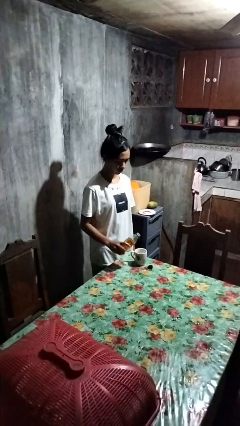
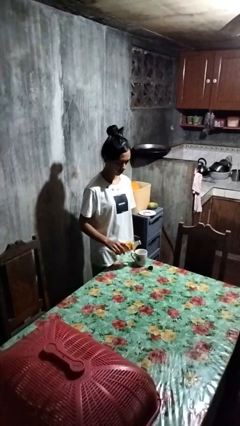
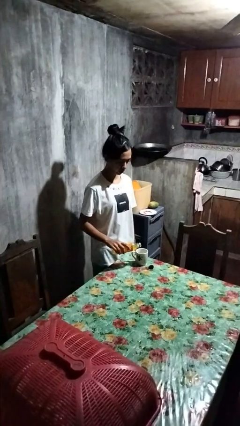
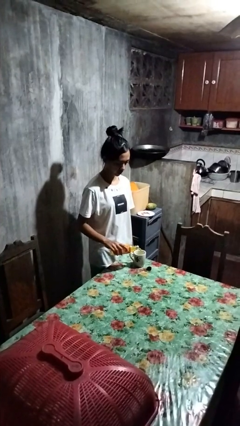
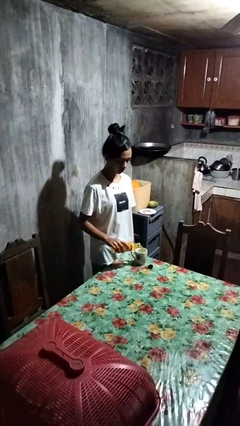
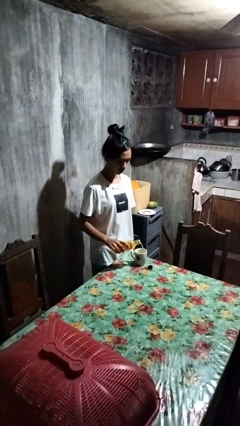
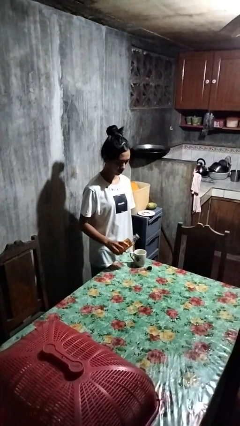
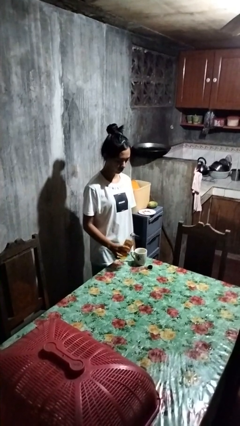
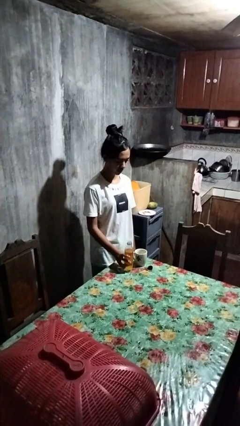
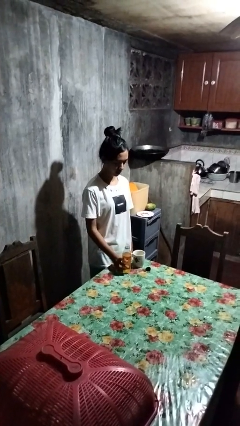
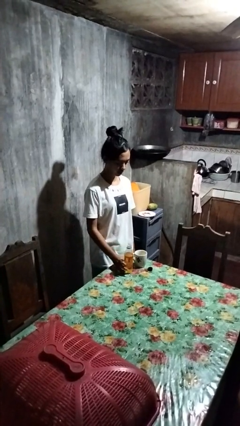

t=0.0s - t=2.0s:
person pours liquid into cup

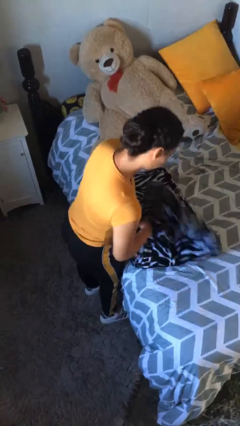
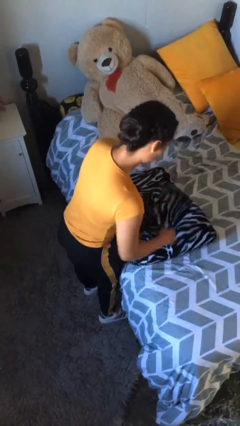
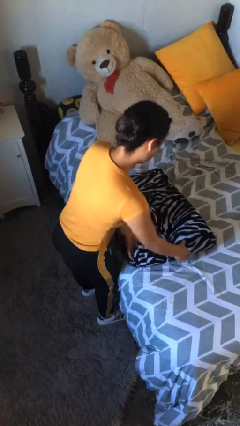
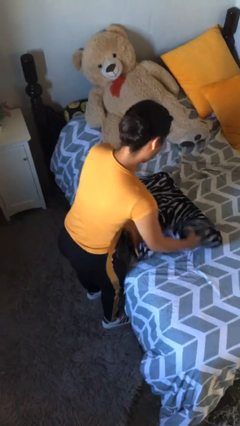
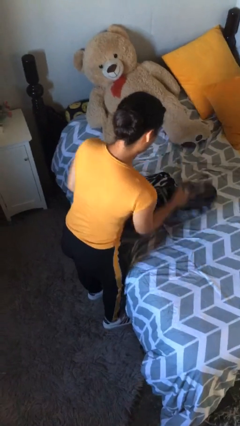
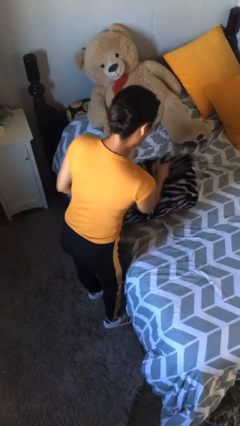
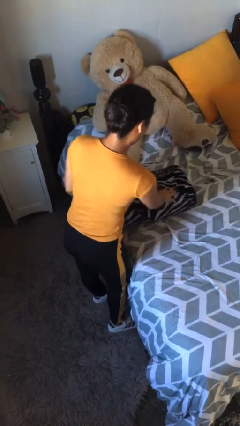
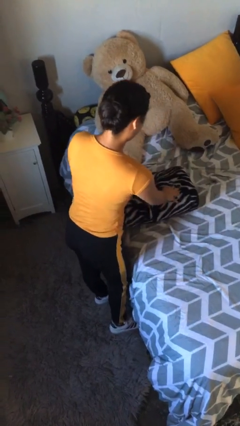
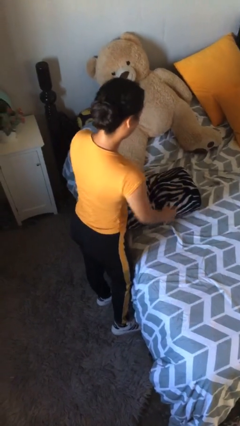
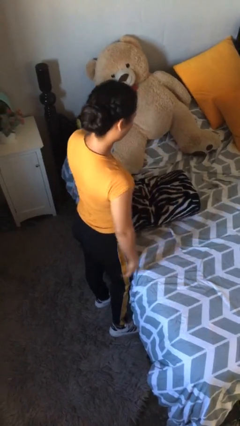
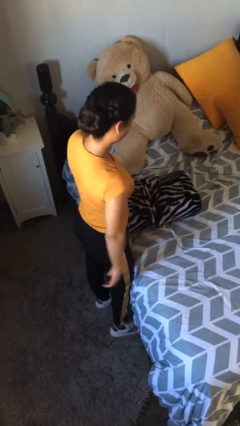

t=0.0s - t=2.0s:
person folds blanket

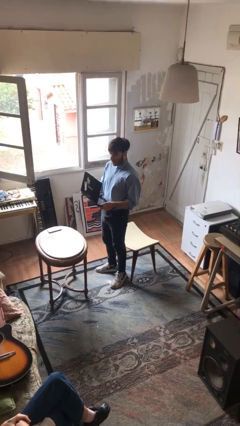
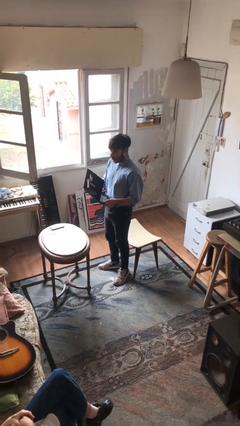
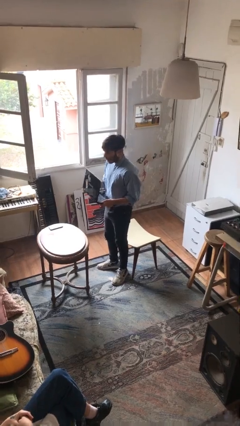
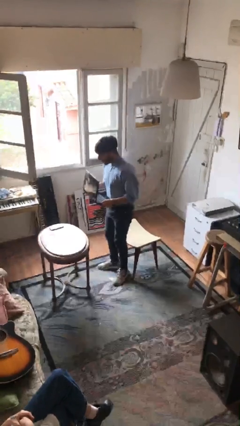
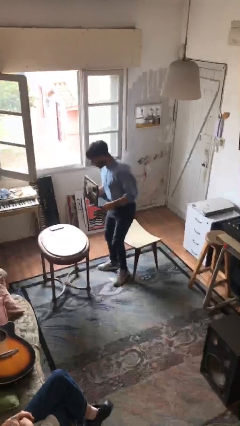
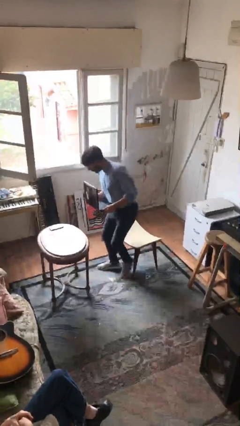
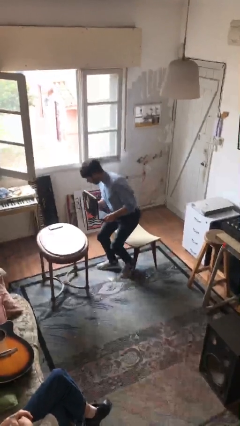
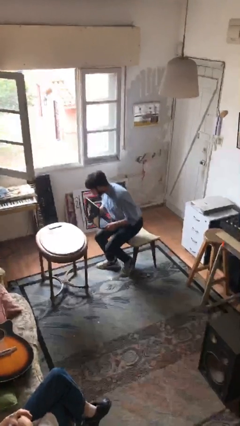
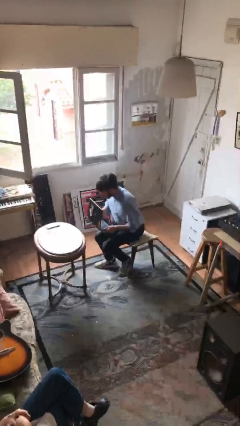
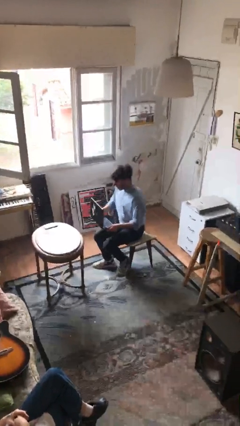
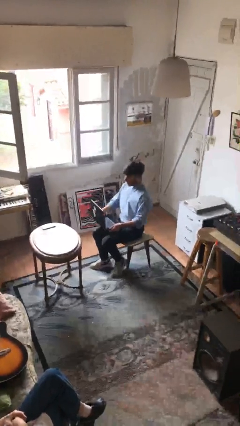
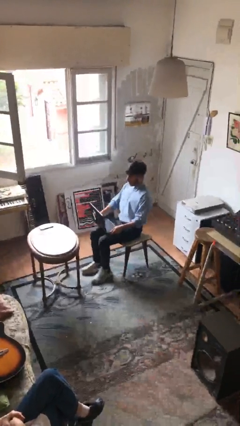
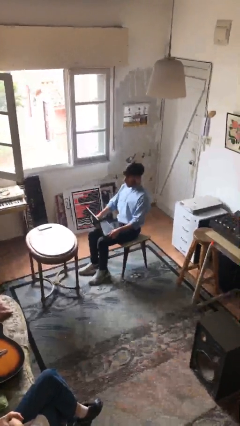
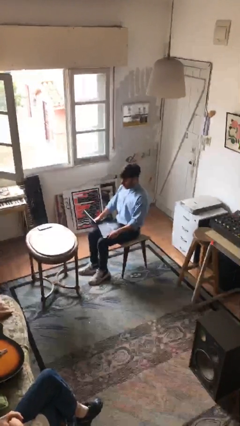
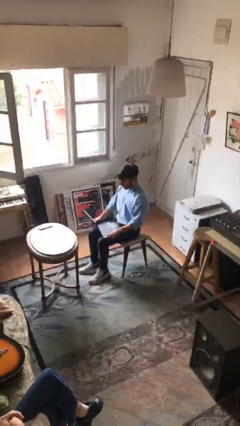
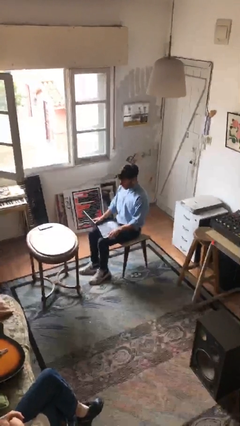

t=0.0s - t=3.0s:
person sits down

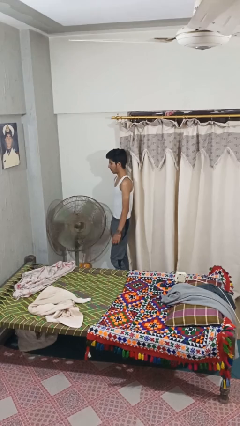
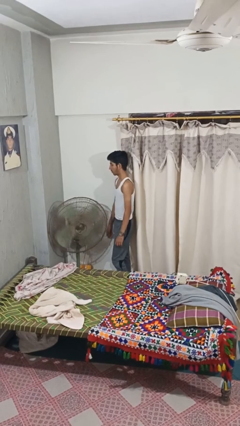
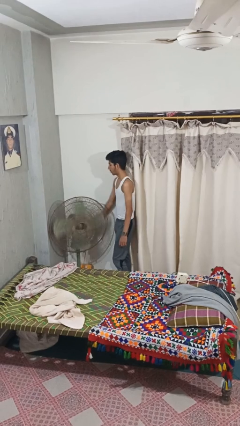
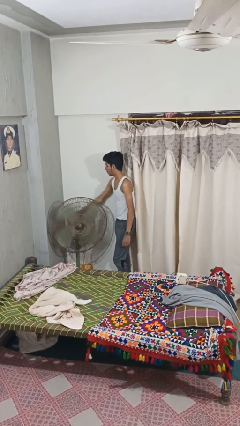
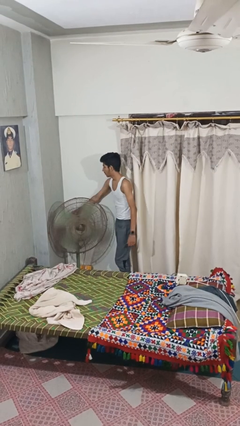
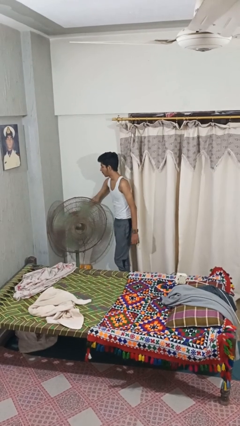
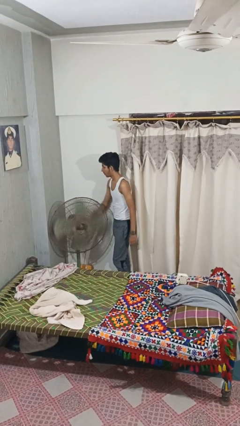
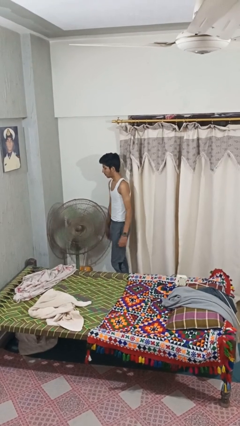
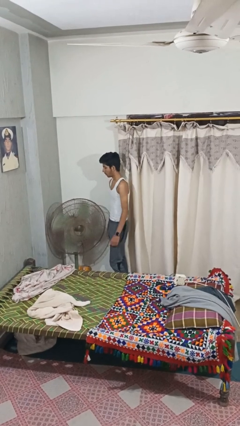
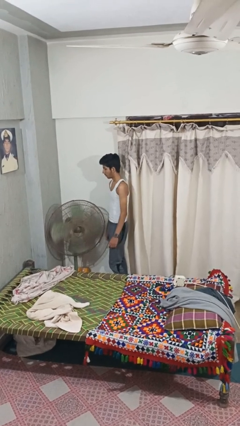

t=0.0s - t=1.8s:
person turns off fan

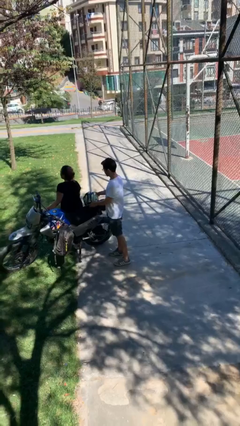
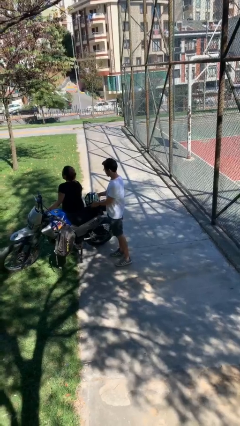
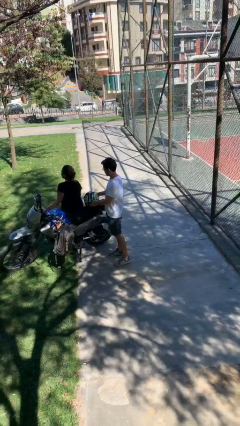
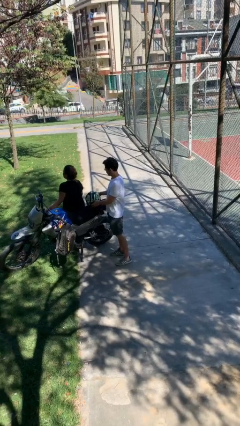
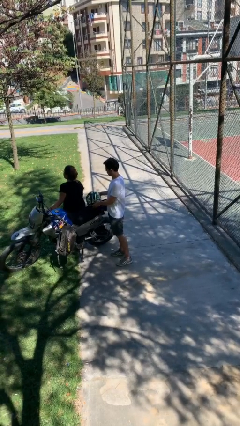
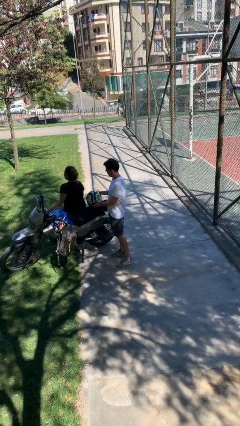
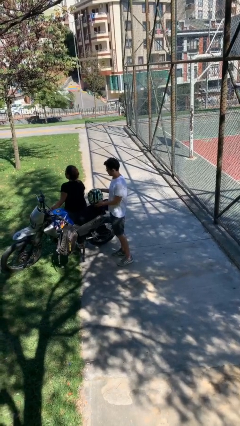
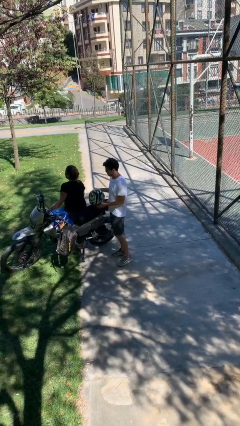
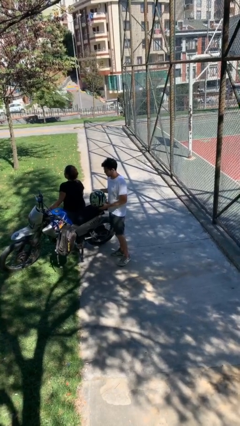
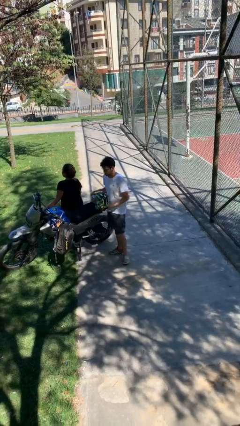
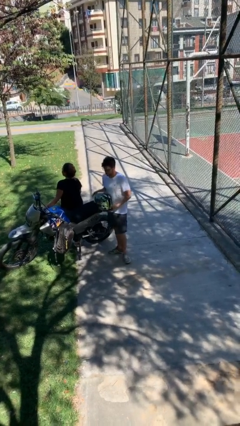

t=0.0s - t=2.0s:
person steals object from person

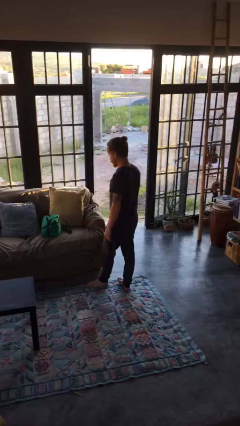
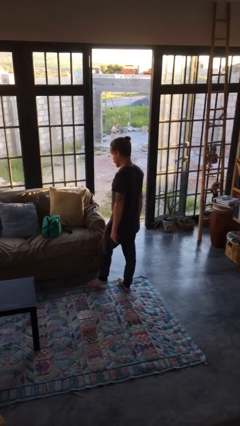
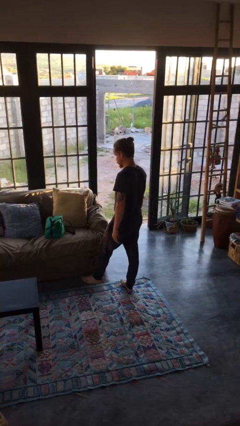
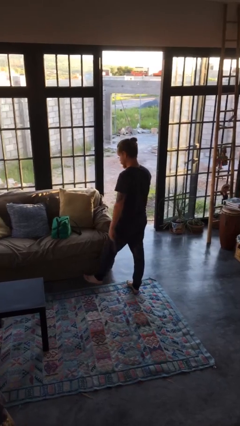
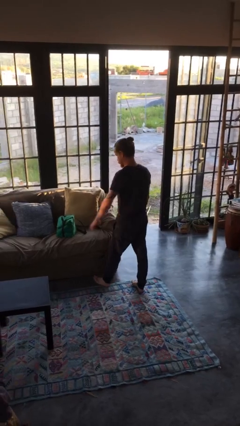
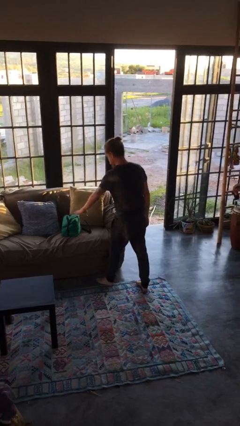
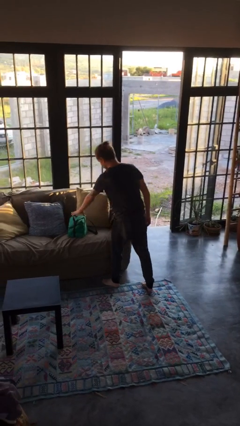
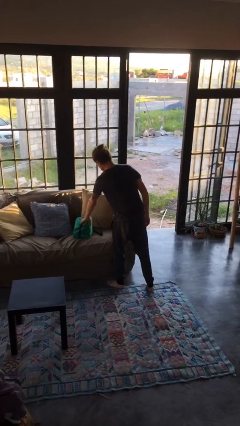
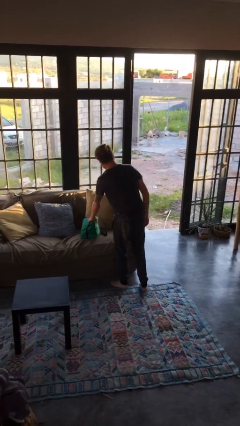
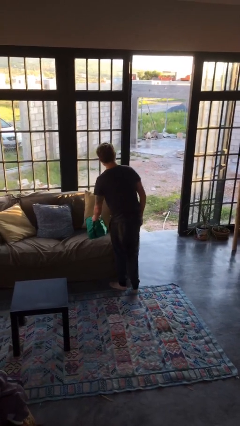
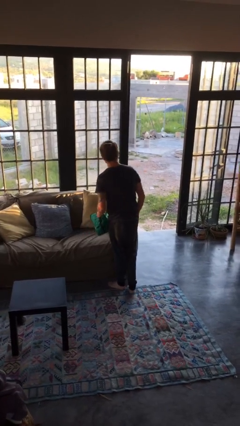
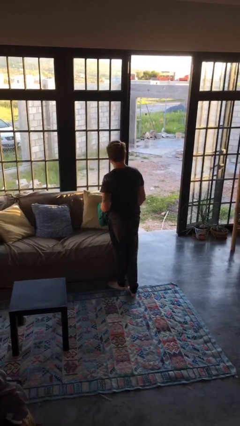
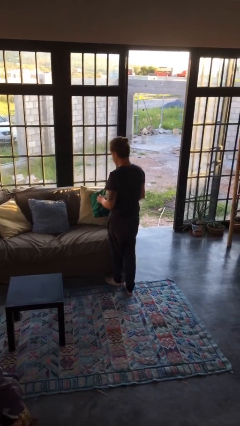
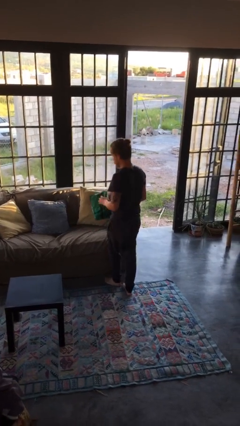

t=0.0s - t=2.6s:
person picks up object from couch

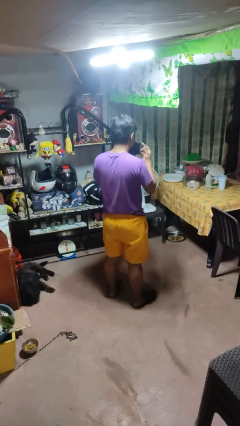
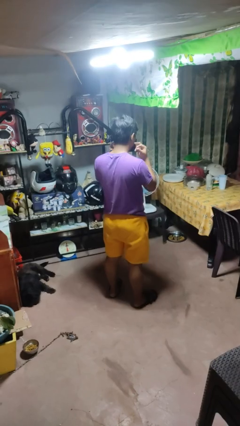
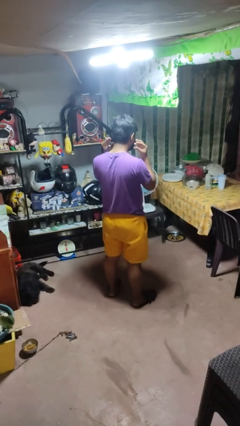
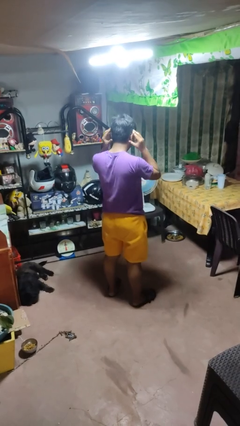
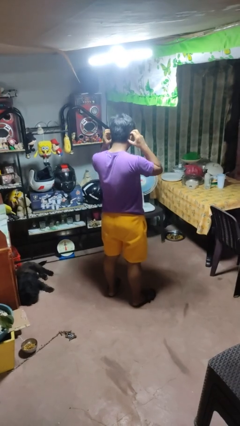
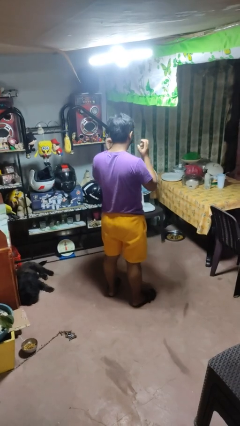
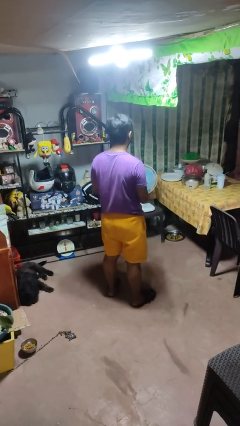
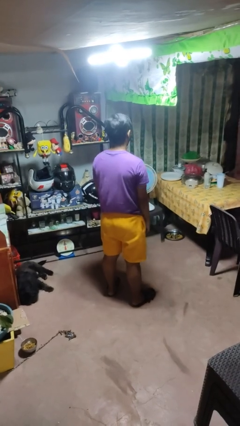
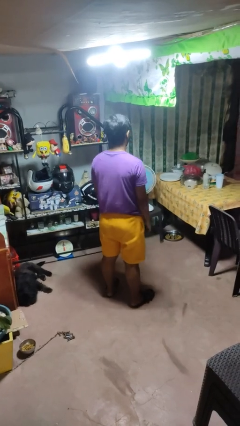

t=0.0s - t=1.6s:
person puts on facemask

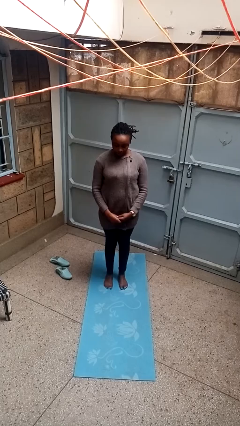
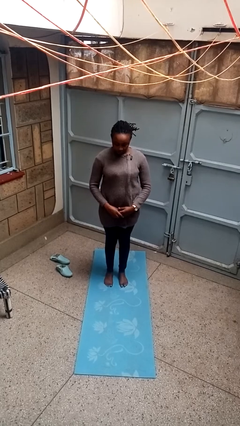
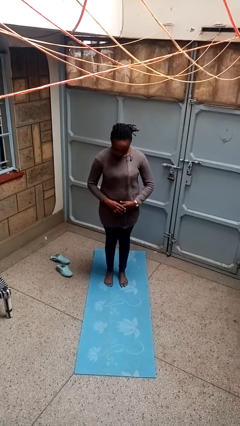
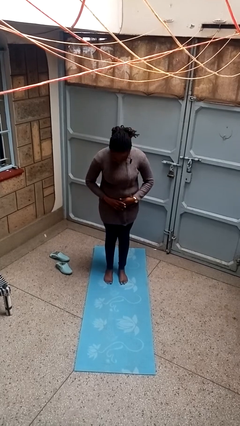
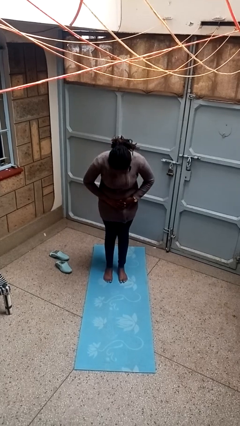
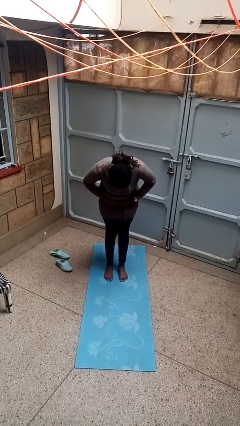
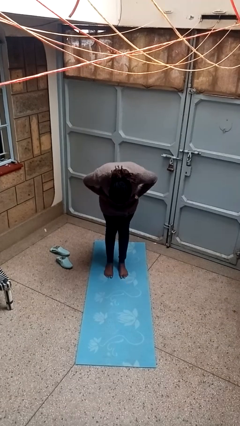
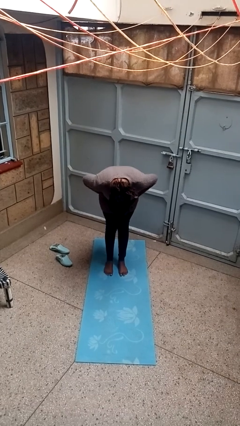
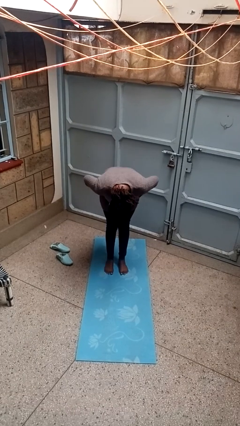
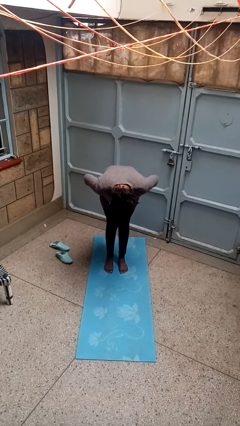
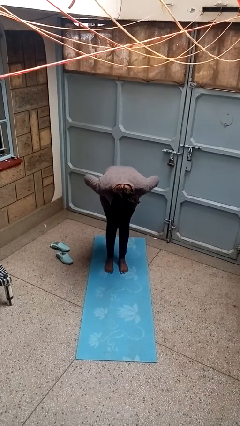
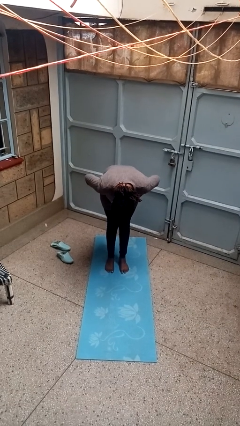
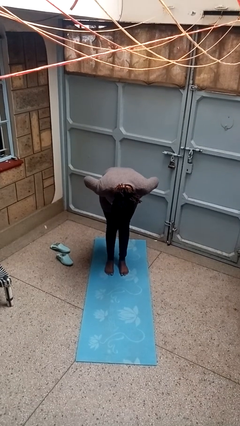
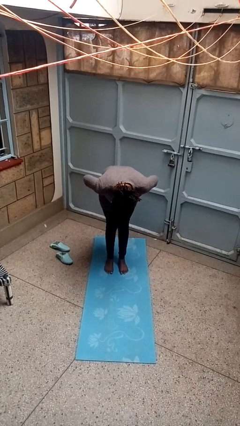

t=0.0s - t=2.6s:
person bows
